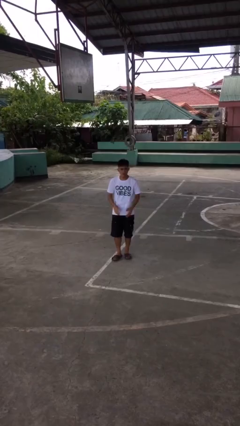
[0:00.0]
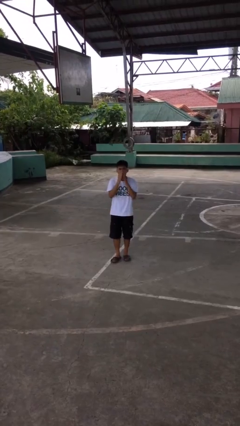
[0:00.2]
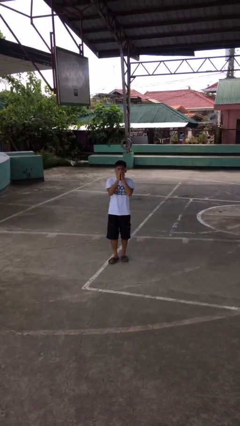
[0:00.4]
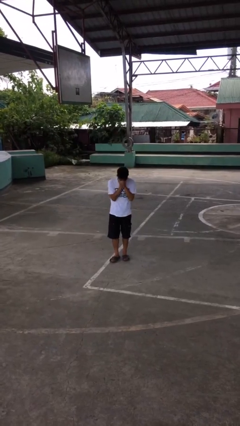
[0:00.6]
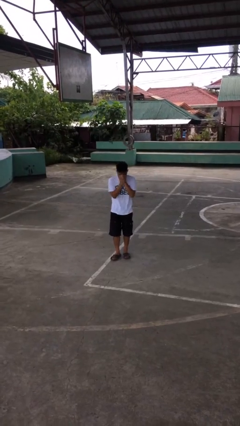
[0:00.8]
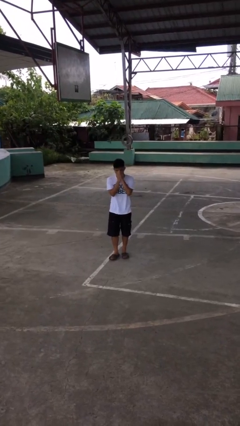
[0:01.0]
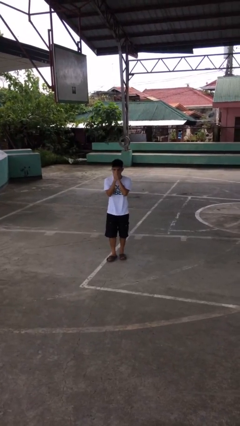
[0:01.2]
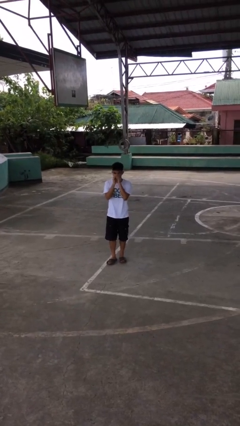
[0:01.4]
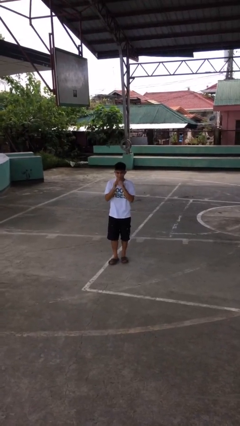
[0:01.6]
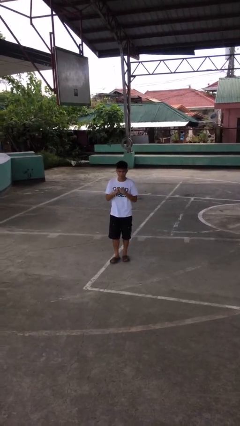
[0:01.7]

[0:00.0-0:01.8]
person sneezes into hand

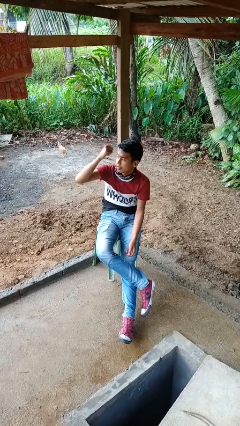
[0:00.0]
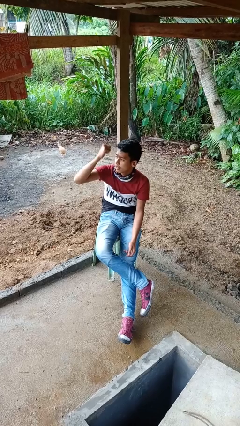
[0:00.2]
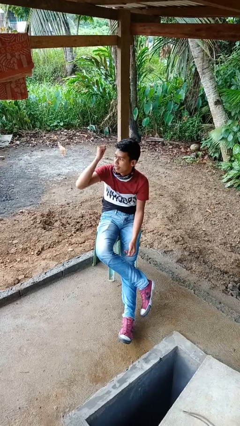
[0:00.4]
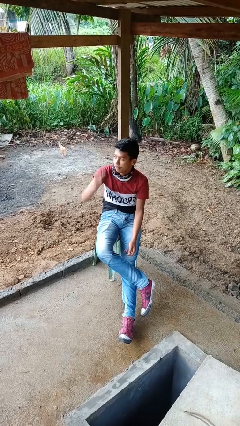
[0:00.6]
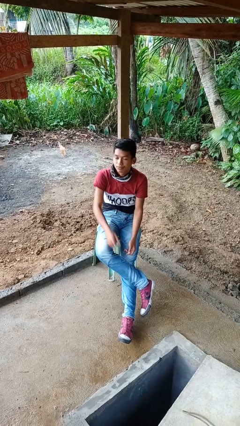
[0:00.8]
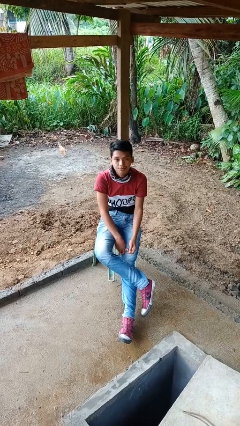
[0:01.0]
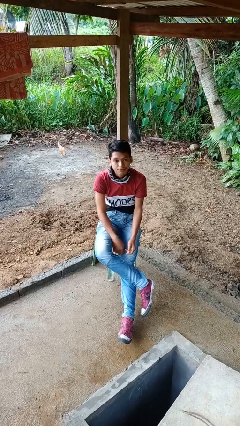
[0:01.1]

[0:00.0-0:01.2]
person gestures behind me

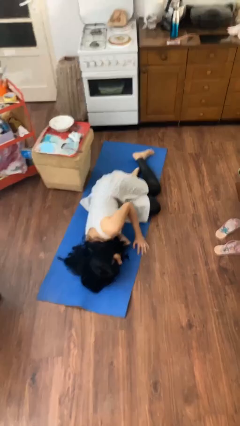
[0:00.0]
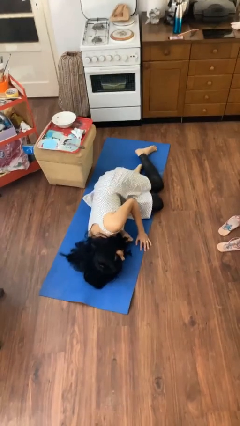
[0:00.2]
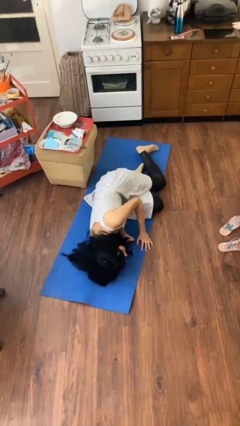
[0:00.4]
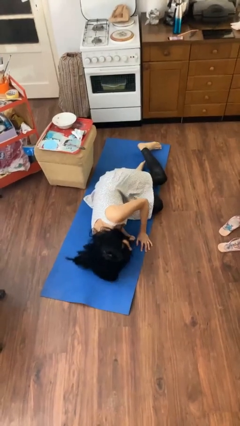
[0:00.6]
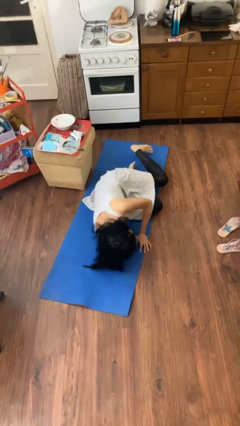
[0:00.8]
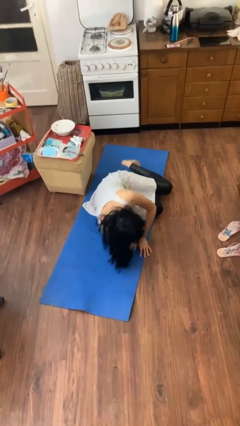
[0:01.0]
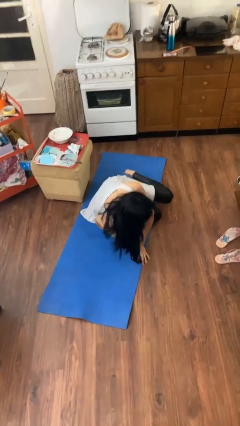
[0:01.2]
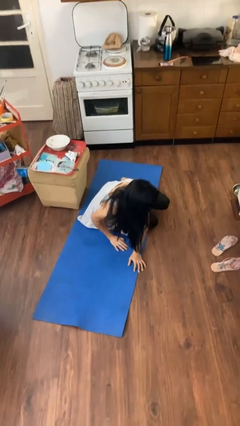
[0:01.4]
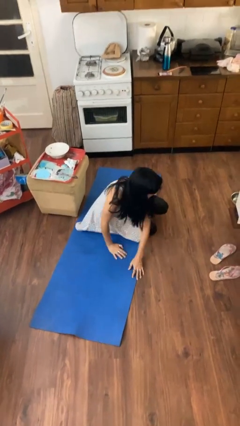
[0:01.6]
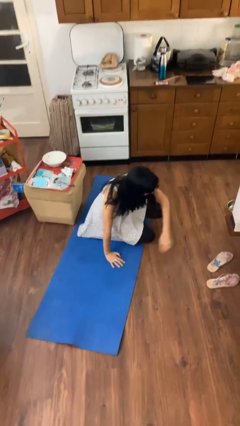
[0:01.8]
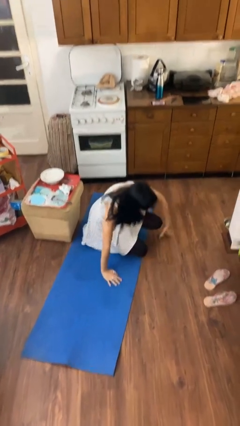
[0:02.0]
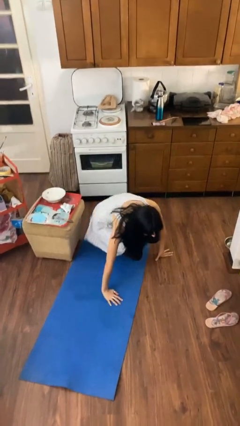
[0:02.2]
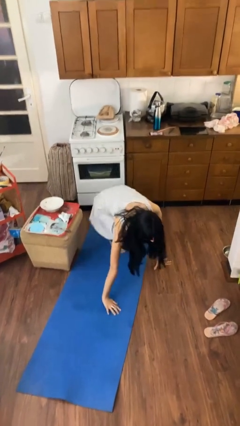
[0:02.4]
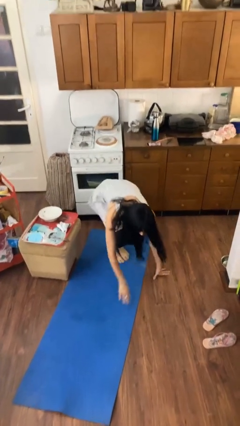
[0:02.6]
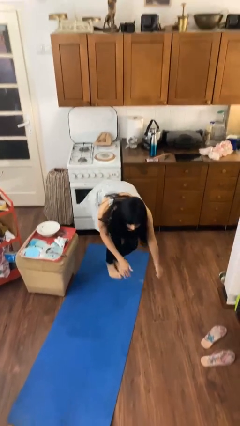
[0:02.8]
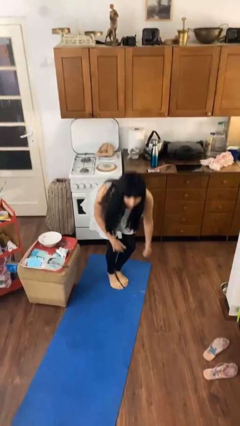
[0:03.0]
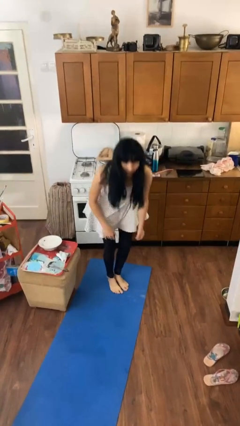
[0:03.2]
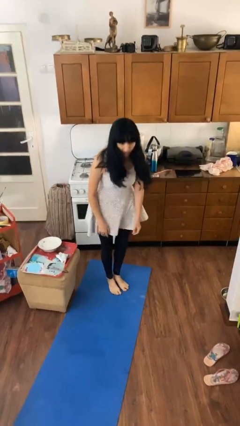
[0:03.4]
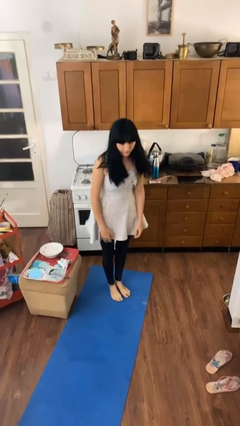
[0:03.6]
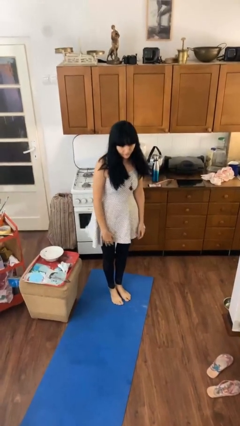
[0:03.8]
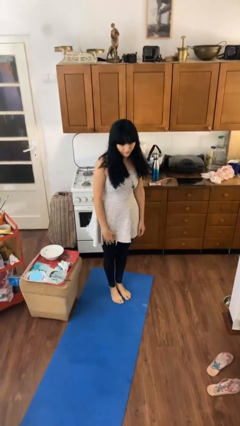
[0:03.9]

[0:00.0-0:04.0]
person stands up from floor

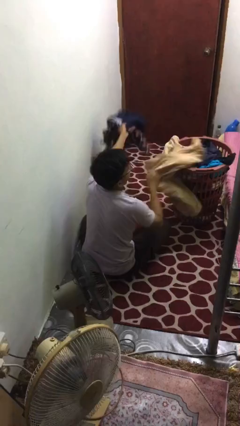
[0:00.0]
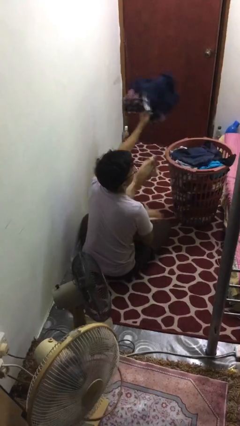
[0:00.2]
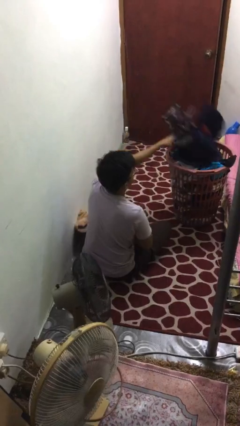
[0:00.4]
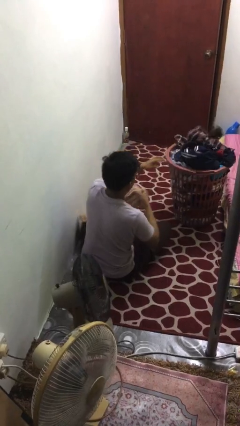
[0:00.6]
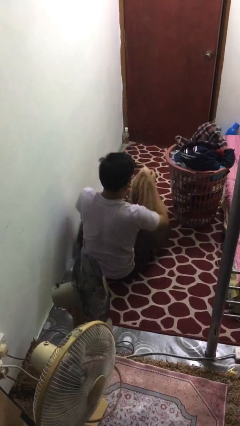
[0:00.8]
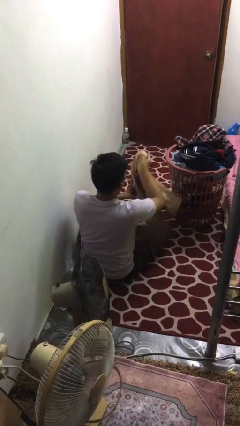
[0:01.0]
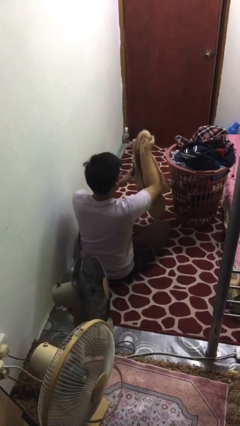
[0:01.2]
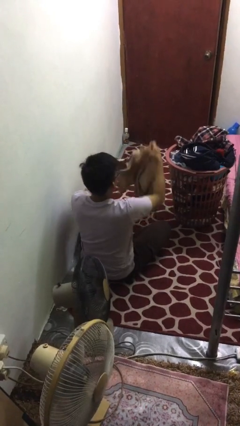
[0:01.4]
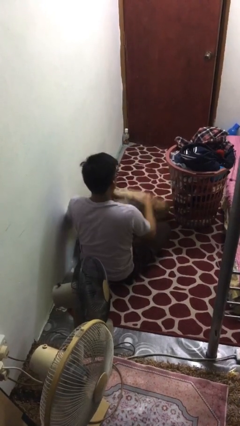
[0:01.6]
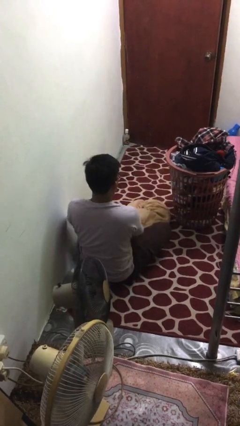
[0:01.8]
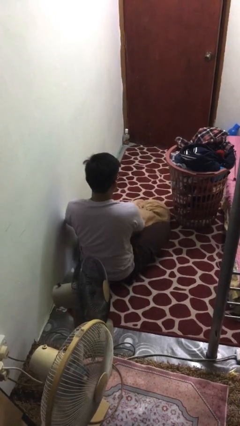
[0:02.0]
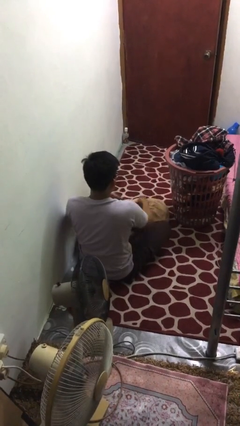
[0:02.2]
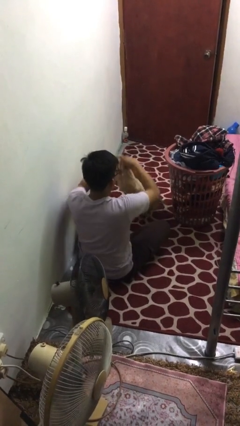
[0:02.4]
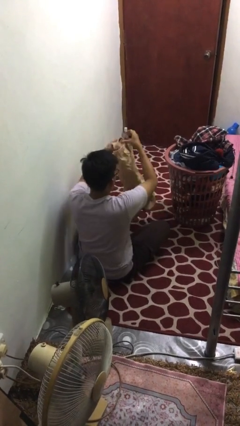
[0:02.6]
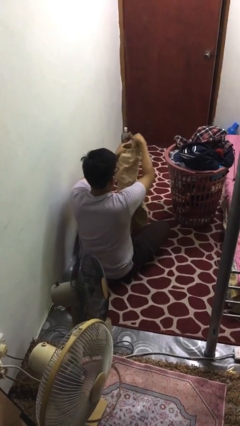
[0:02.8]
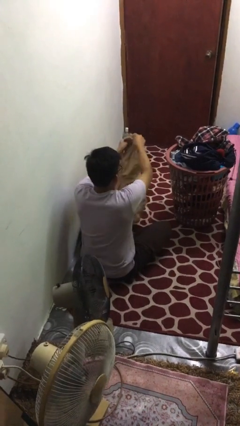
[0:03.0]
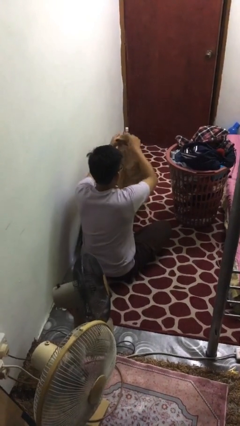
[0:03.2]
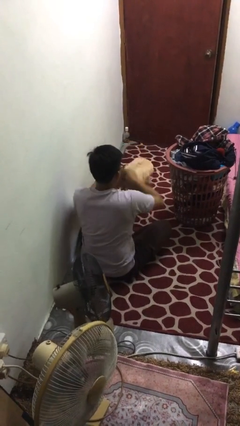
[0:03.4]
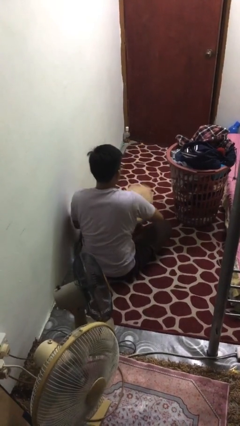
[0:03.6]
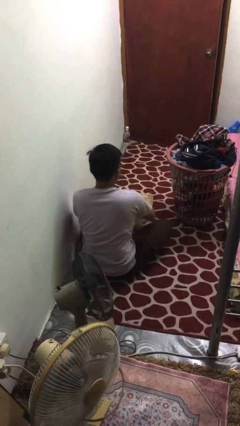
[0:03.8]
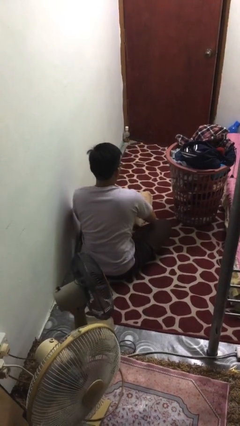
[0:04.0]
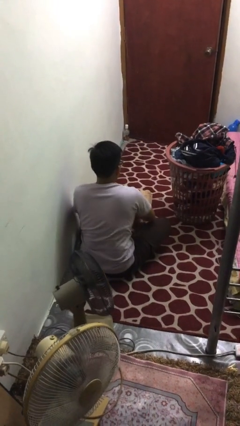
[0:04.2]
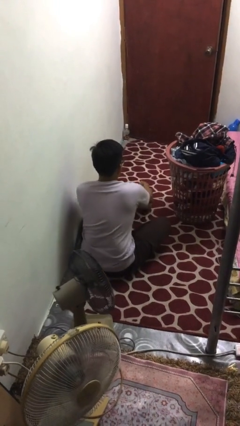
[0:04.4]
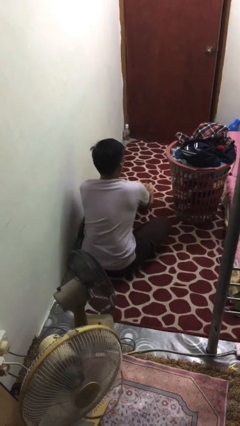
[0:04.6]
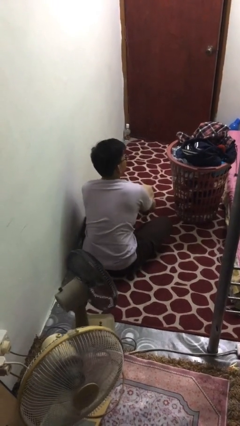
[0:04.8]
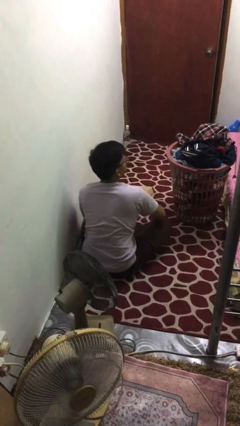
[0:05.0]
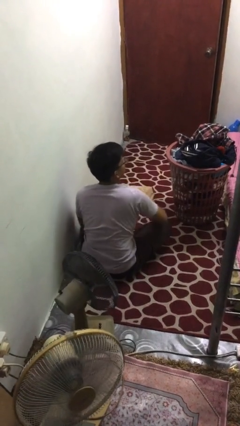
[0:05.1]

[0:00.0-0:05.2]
person folds pants

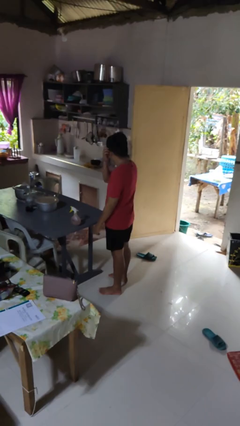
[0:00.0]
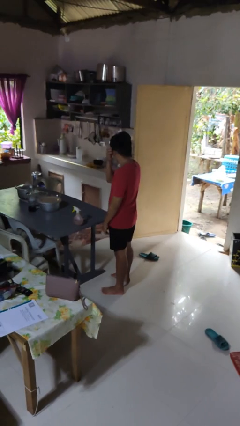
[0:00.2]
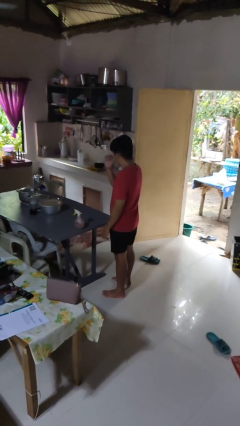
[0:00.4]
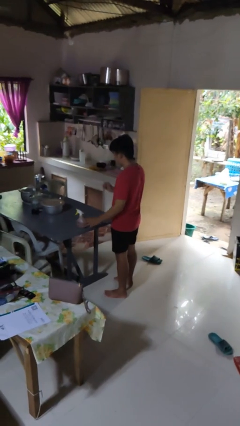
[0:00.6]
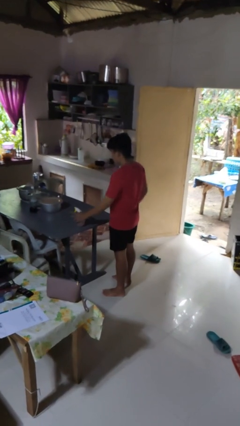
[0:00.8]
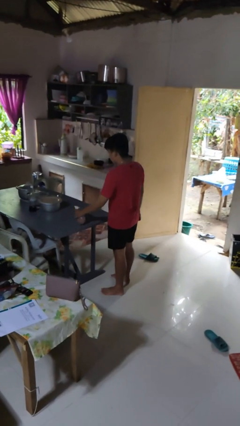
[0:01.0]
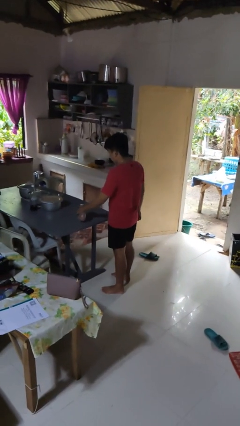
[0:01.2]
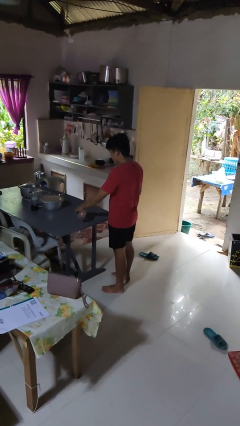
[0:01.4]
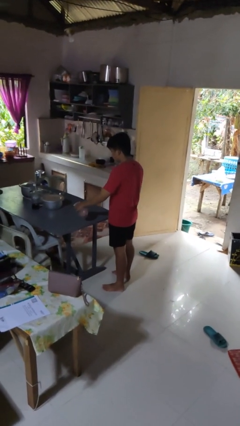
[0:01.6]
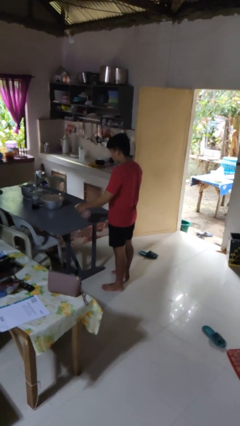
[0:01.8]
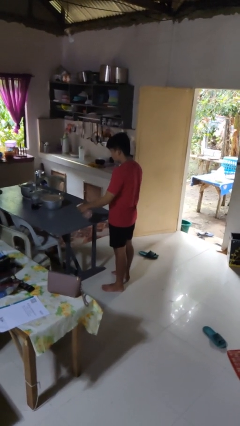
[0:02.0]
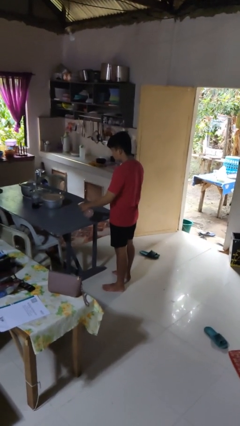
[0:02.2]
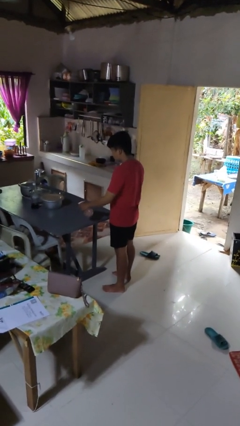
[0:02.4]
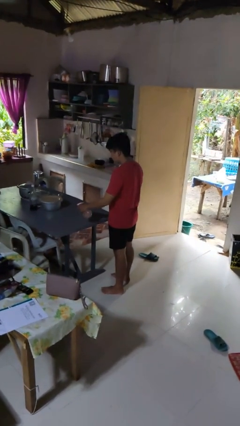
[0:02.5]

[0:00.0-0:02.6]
person sprays from bottle

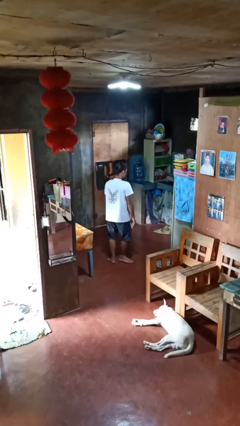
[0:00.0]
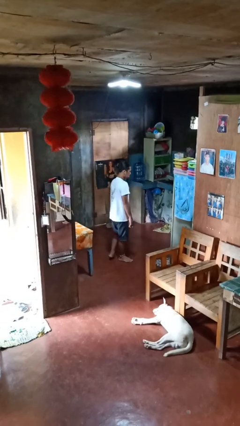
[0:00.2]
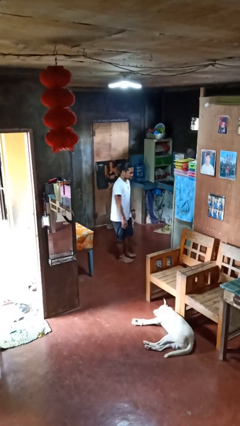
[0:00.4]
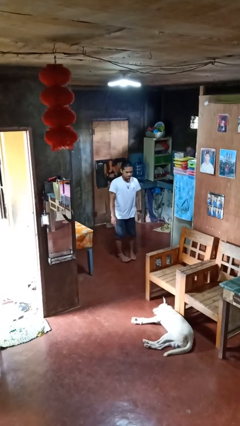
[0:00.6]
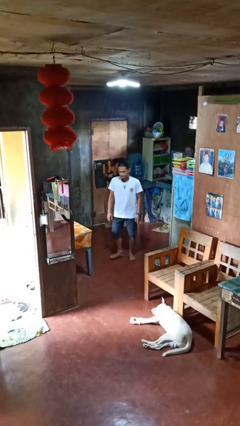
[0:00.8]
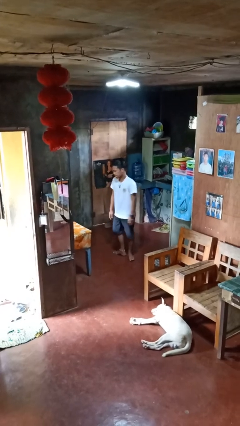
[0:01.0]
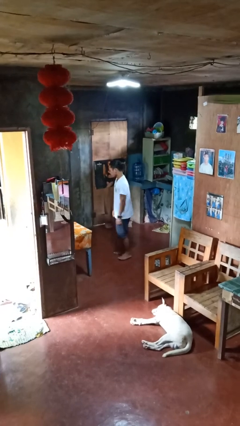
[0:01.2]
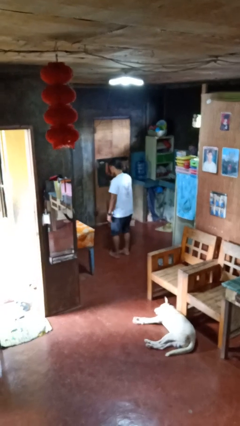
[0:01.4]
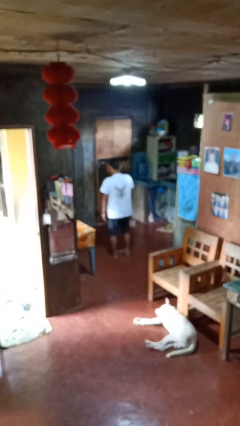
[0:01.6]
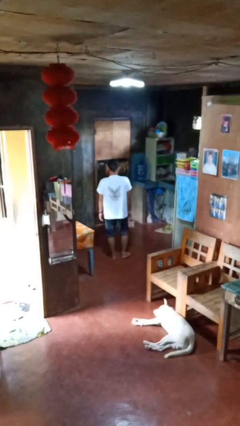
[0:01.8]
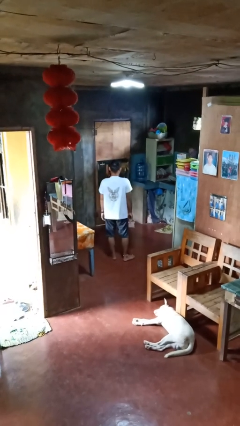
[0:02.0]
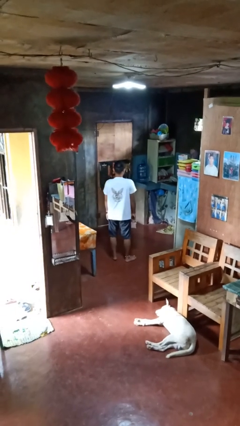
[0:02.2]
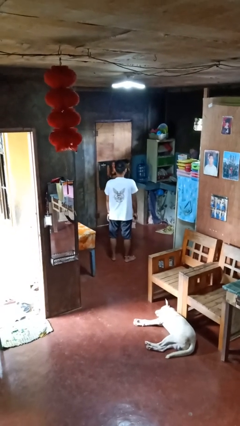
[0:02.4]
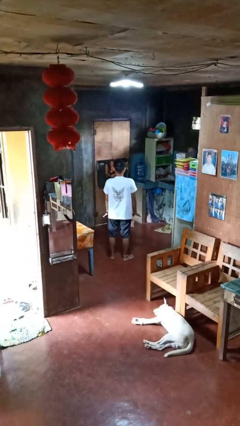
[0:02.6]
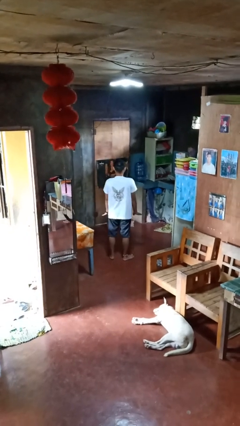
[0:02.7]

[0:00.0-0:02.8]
person twirls
